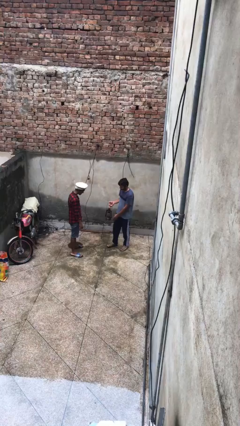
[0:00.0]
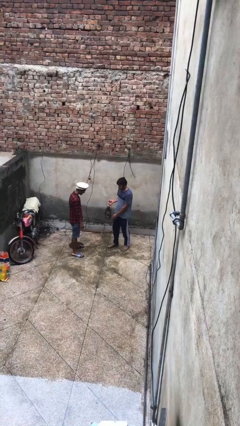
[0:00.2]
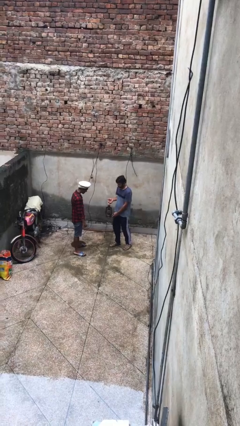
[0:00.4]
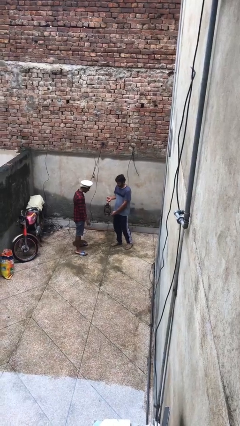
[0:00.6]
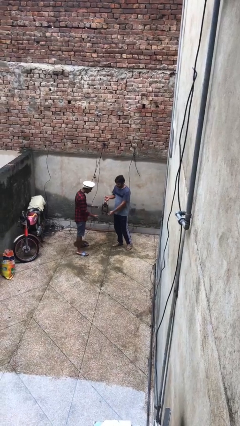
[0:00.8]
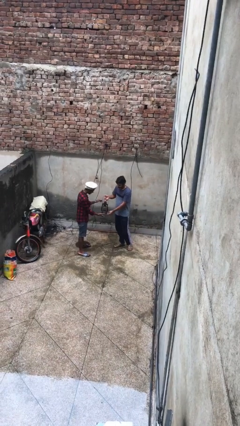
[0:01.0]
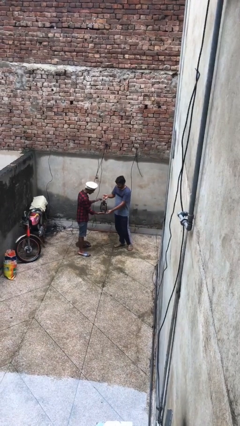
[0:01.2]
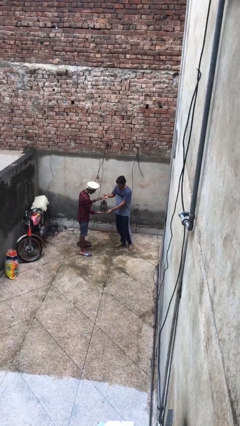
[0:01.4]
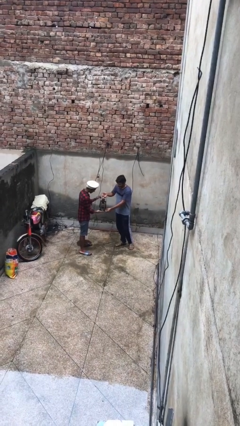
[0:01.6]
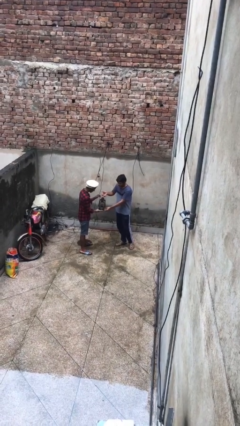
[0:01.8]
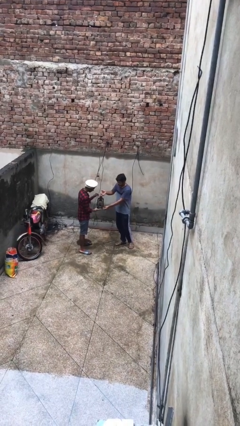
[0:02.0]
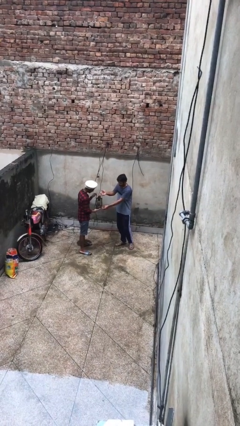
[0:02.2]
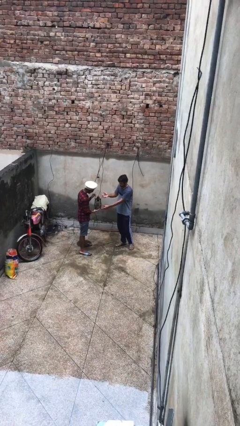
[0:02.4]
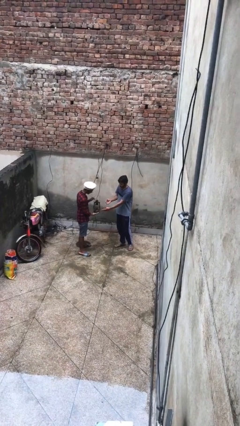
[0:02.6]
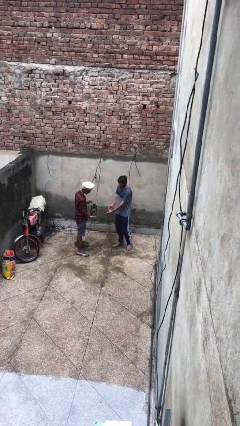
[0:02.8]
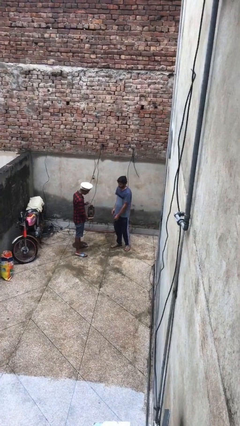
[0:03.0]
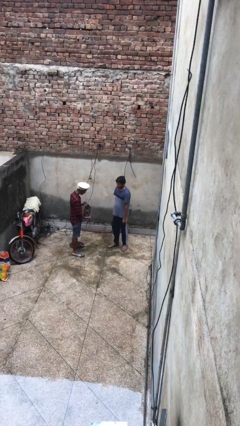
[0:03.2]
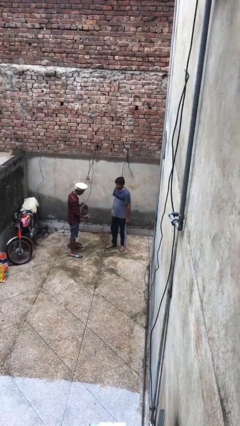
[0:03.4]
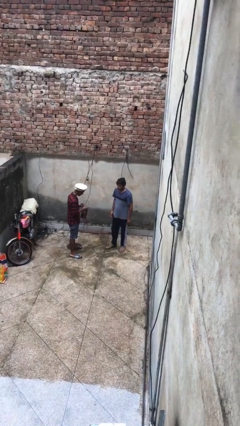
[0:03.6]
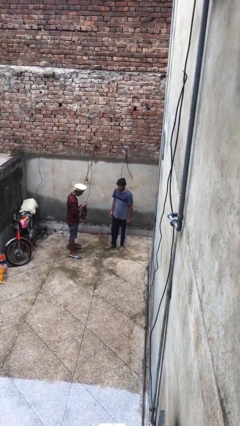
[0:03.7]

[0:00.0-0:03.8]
person transfers object to person

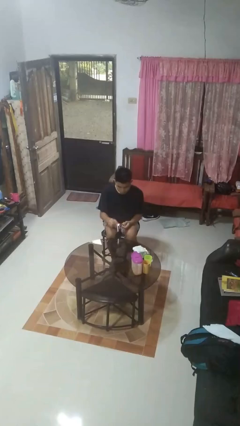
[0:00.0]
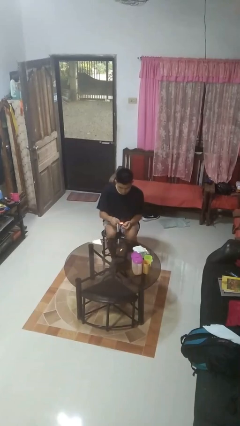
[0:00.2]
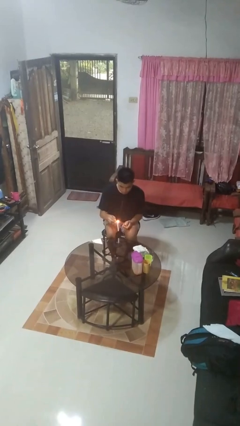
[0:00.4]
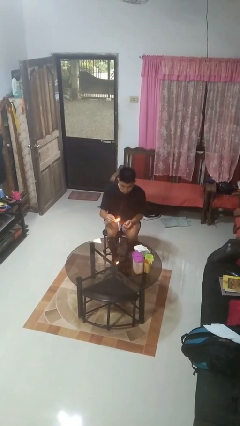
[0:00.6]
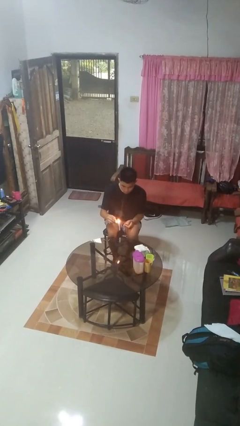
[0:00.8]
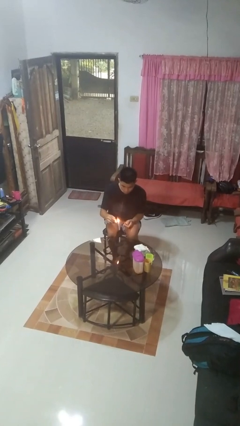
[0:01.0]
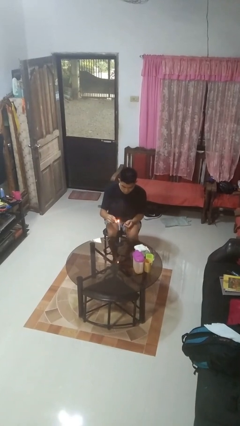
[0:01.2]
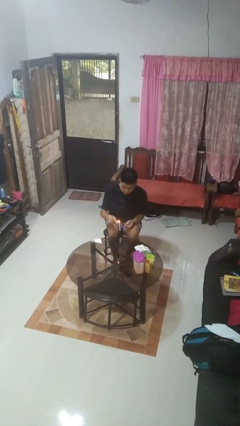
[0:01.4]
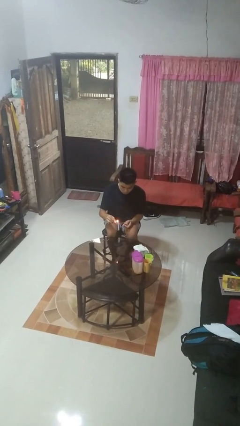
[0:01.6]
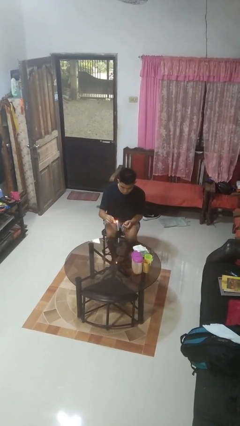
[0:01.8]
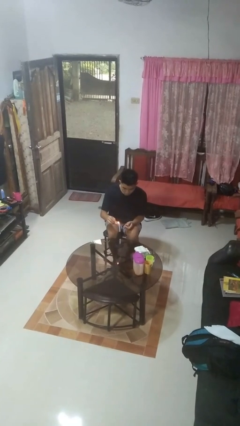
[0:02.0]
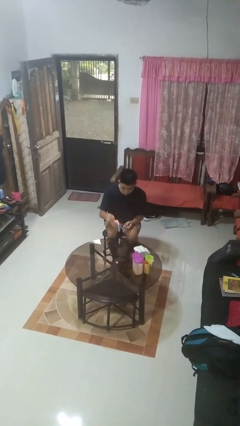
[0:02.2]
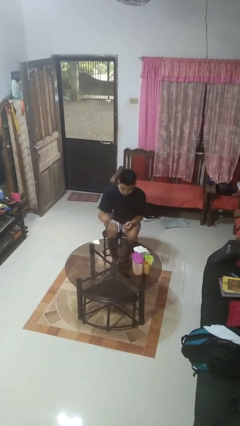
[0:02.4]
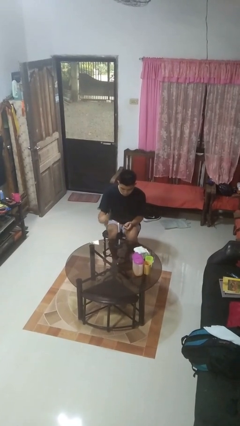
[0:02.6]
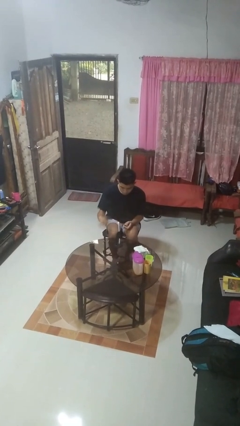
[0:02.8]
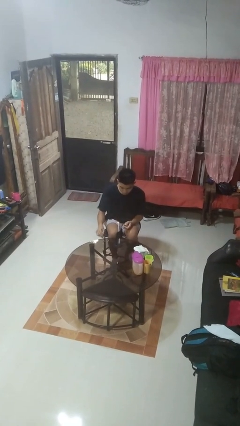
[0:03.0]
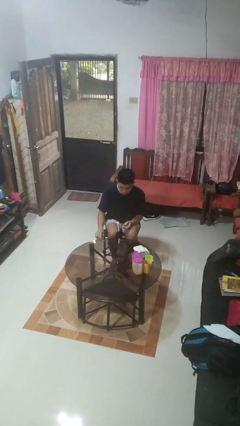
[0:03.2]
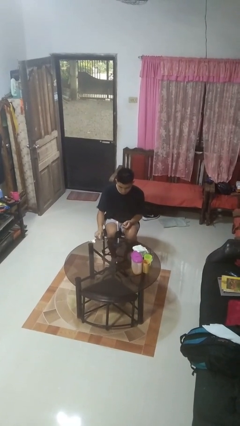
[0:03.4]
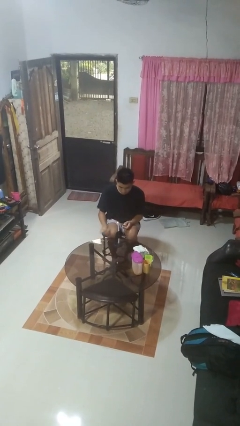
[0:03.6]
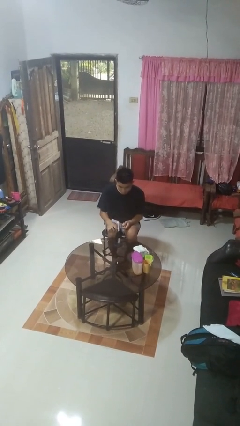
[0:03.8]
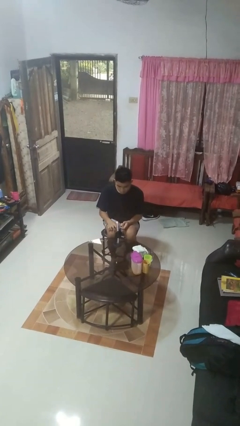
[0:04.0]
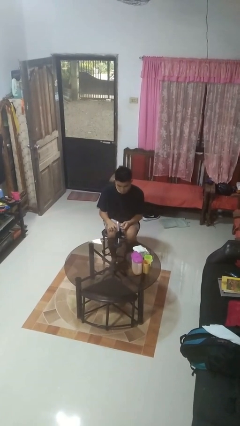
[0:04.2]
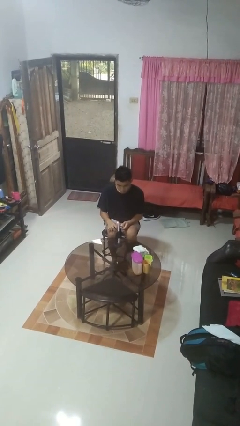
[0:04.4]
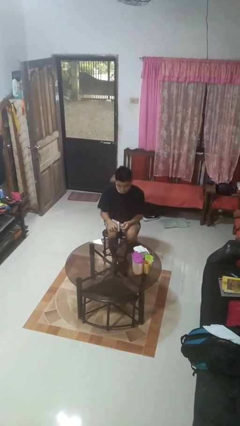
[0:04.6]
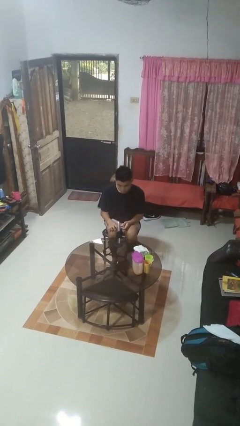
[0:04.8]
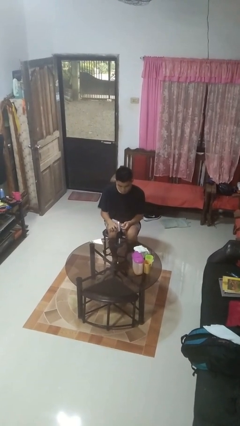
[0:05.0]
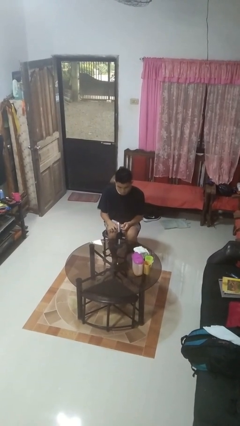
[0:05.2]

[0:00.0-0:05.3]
person lights candle

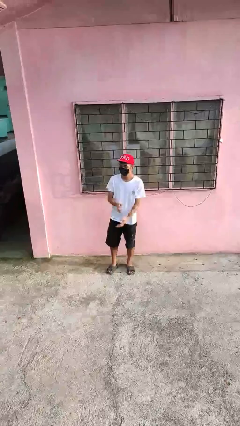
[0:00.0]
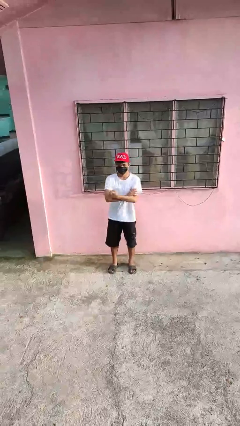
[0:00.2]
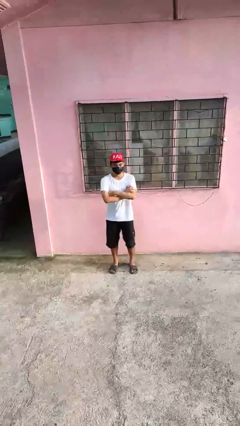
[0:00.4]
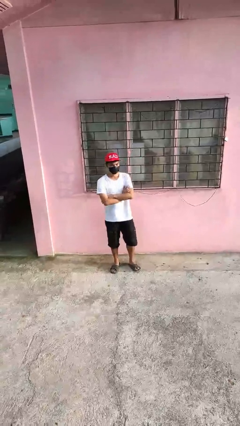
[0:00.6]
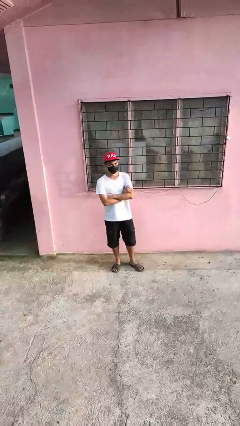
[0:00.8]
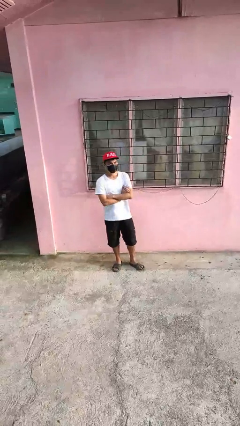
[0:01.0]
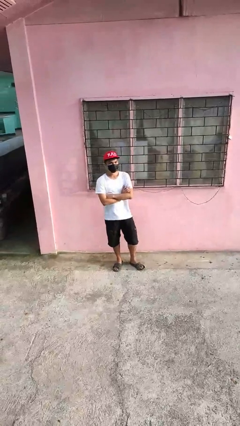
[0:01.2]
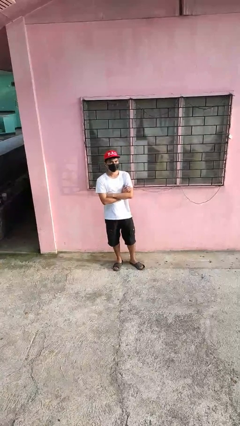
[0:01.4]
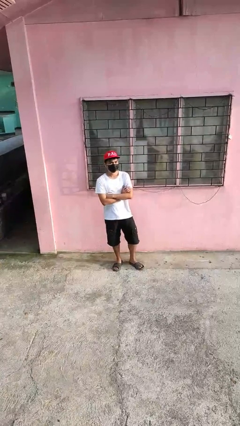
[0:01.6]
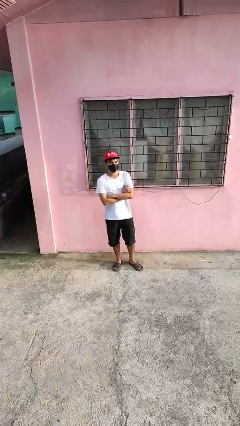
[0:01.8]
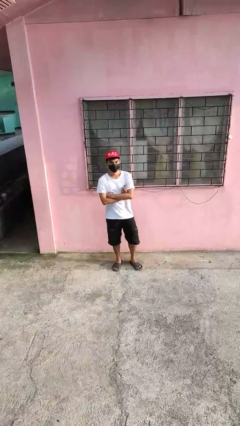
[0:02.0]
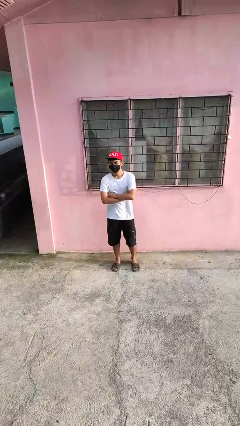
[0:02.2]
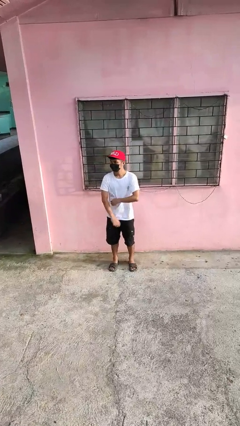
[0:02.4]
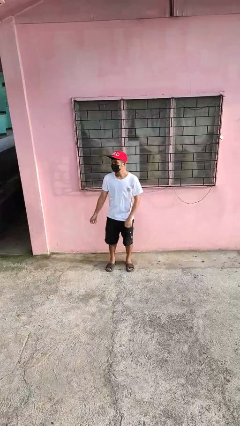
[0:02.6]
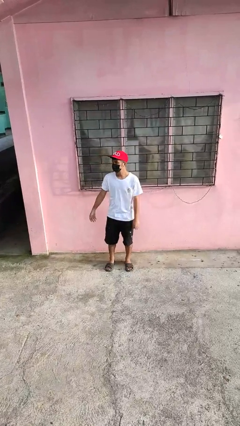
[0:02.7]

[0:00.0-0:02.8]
person crosses arms

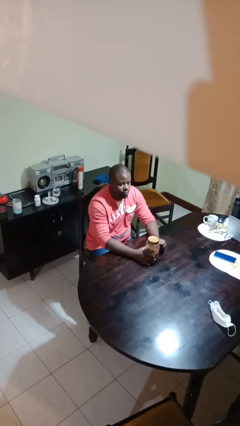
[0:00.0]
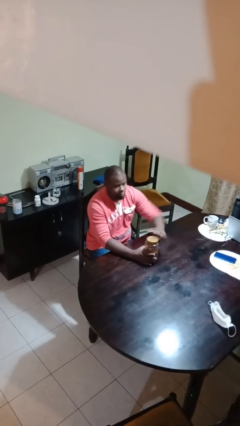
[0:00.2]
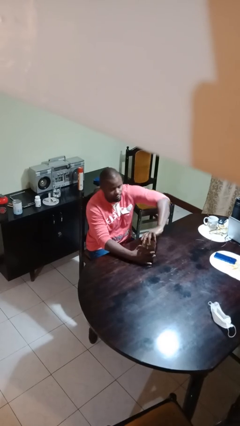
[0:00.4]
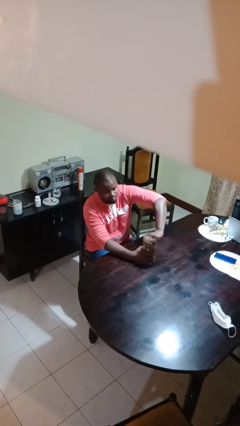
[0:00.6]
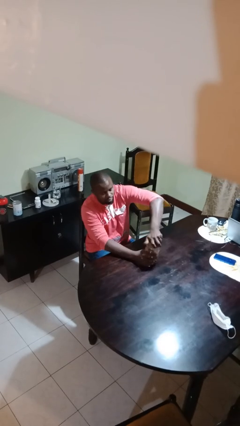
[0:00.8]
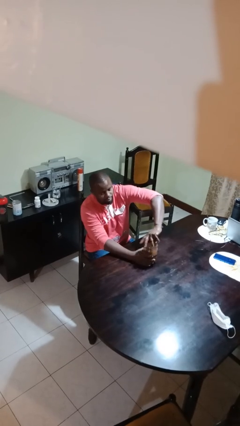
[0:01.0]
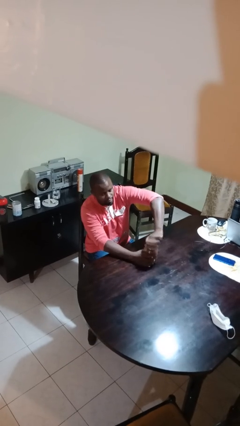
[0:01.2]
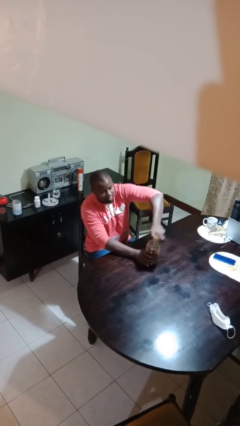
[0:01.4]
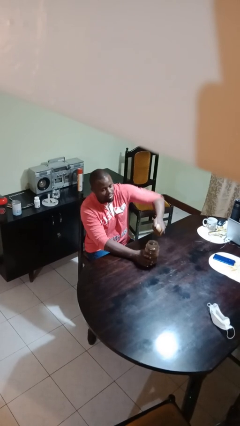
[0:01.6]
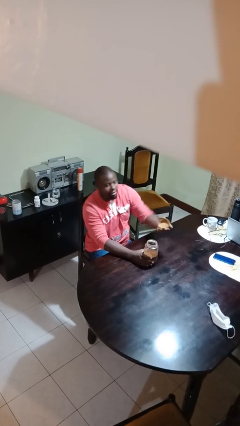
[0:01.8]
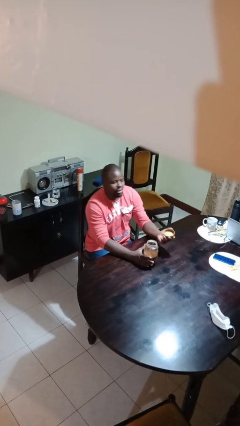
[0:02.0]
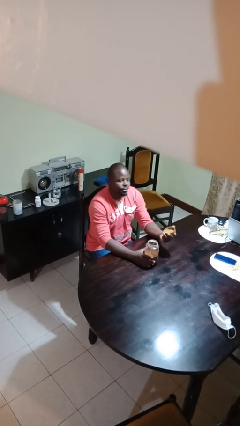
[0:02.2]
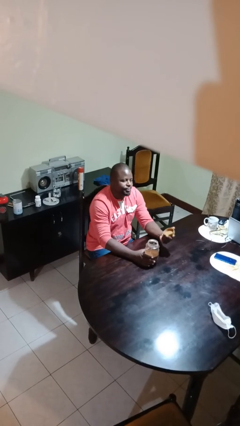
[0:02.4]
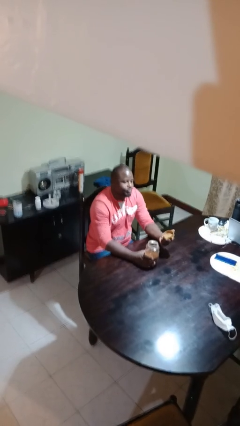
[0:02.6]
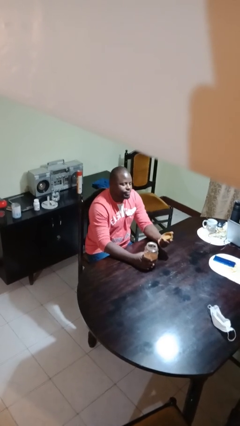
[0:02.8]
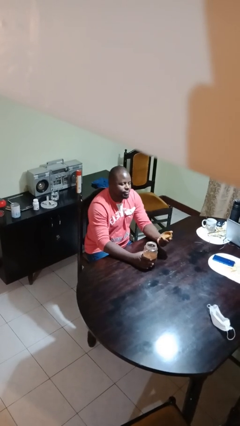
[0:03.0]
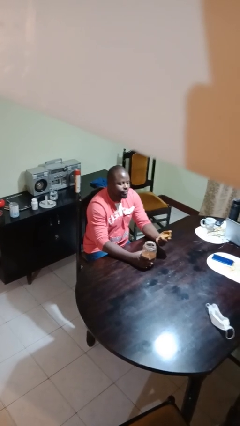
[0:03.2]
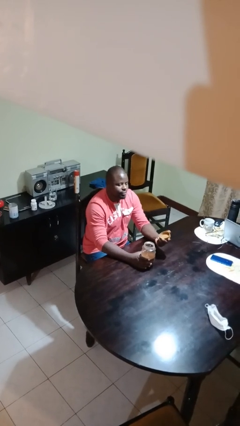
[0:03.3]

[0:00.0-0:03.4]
person opens jar

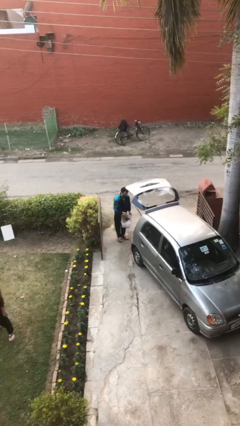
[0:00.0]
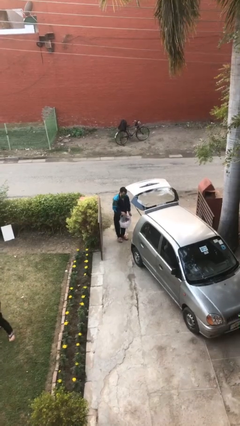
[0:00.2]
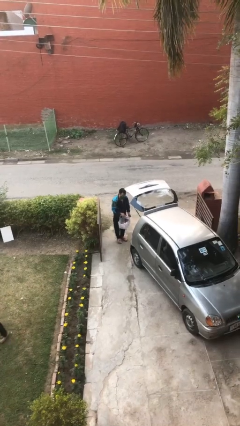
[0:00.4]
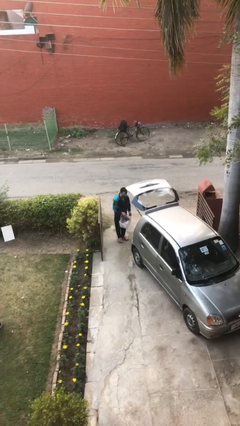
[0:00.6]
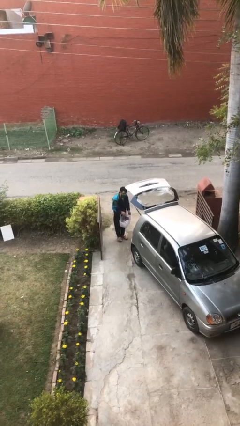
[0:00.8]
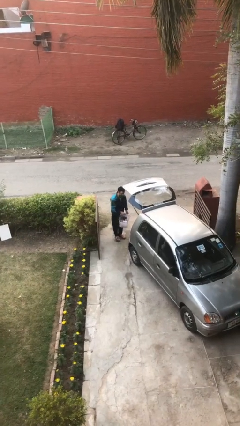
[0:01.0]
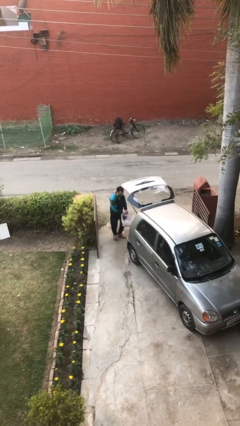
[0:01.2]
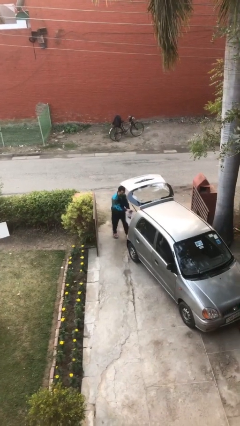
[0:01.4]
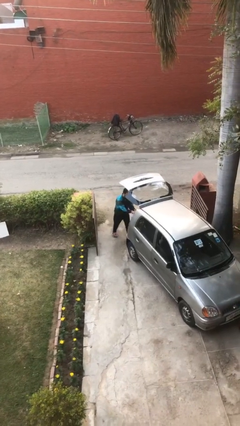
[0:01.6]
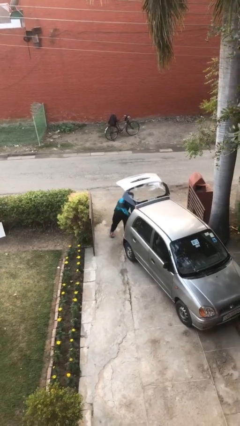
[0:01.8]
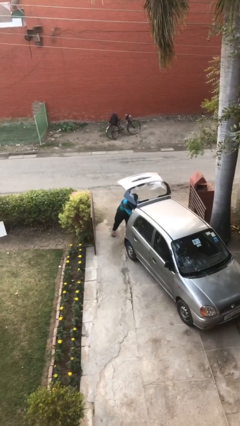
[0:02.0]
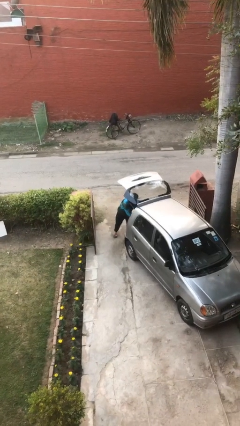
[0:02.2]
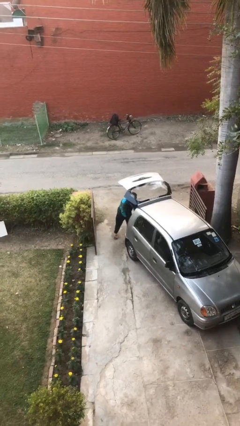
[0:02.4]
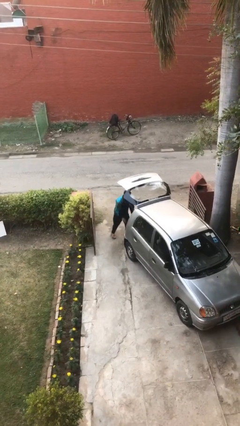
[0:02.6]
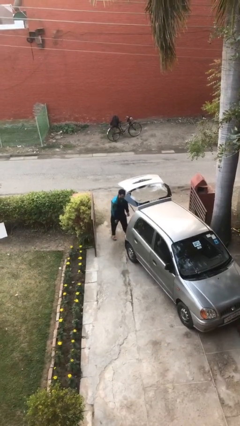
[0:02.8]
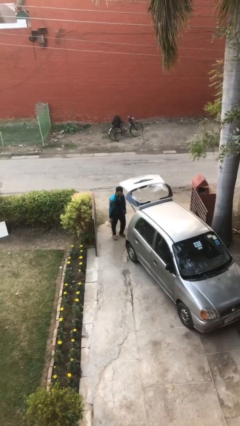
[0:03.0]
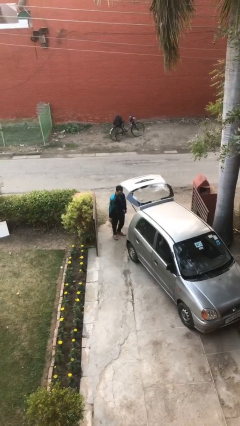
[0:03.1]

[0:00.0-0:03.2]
person loads car
